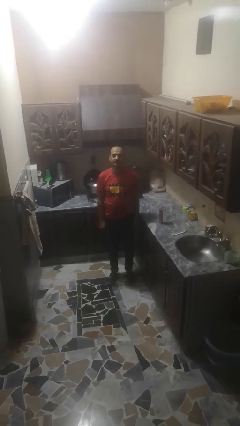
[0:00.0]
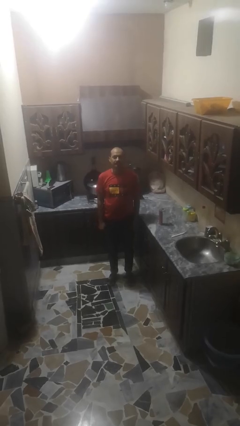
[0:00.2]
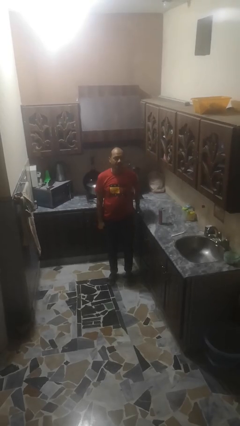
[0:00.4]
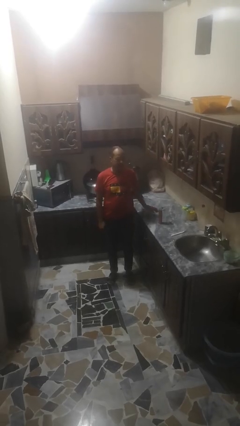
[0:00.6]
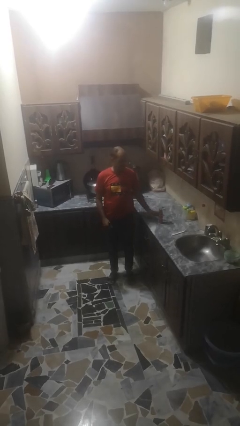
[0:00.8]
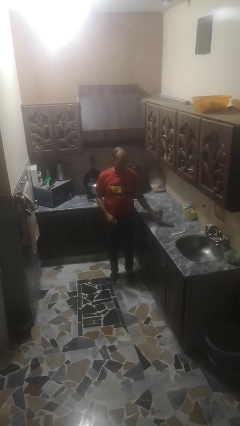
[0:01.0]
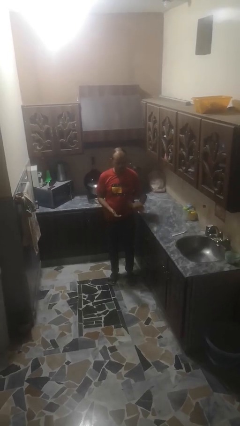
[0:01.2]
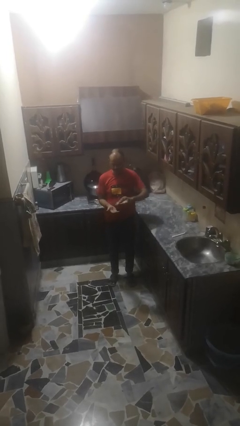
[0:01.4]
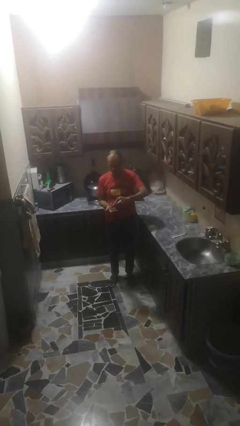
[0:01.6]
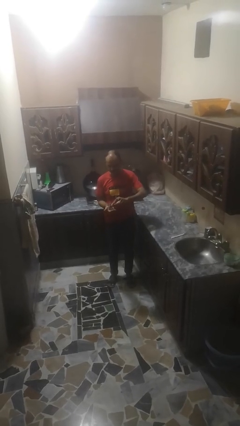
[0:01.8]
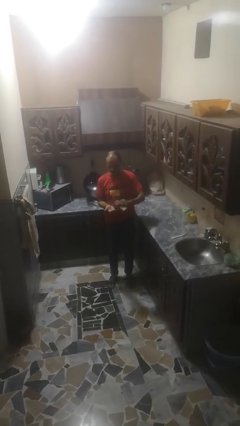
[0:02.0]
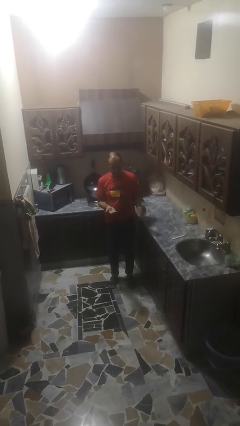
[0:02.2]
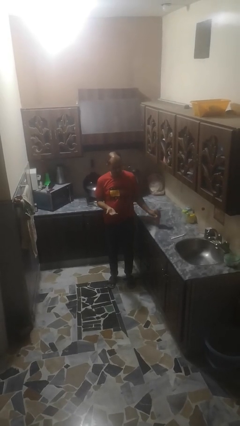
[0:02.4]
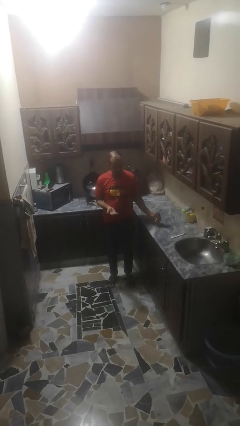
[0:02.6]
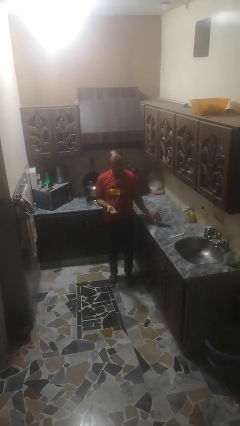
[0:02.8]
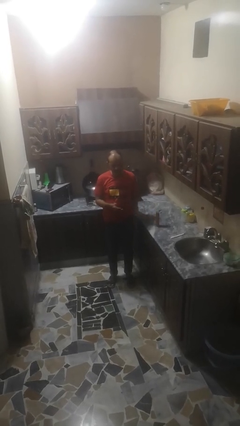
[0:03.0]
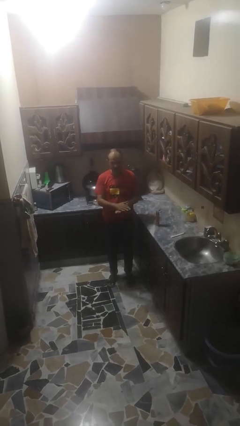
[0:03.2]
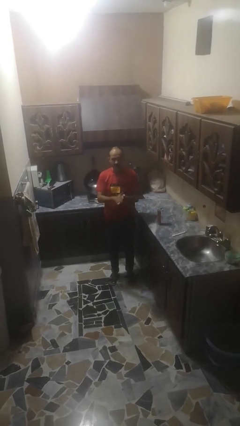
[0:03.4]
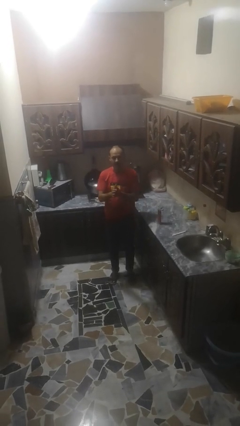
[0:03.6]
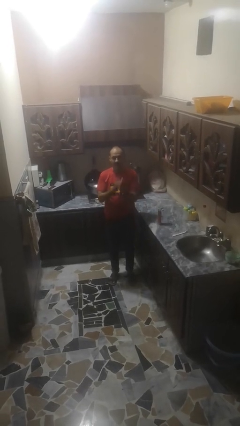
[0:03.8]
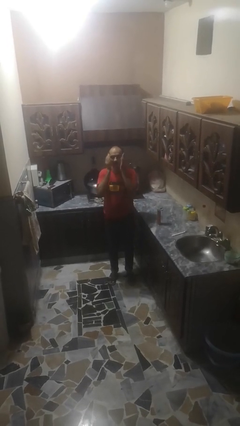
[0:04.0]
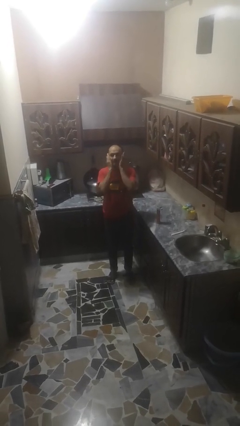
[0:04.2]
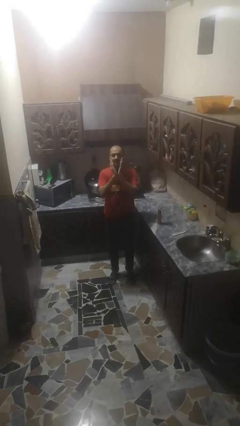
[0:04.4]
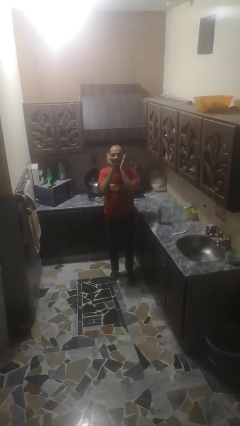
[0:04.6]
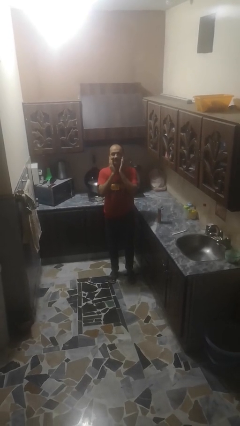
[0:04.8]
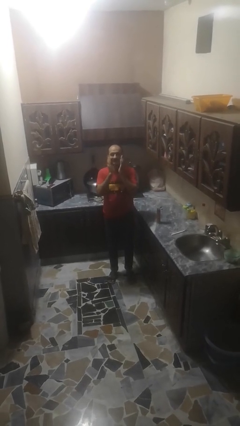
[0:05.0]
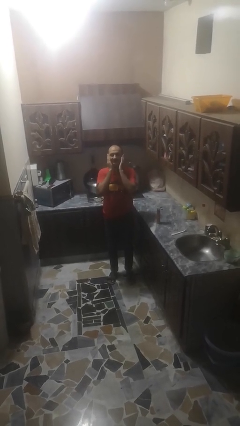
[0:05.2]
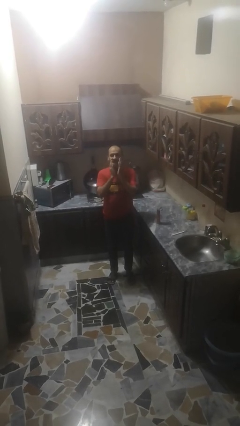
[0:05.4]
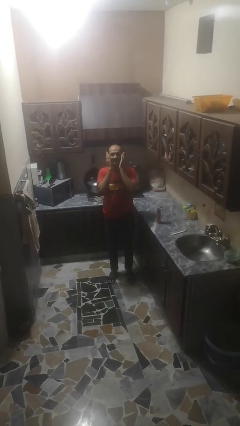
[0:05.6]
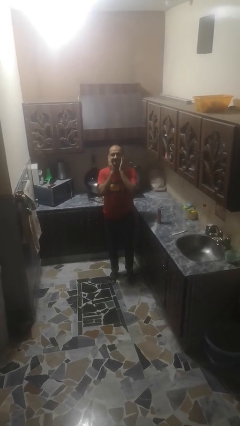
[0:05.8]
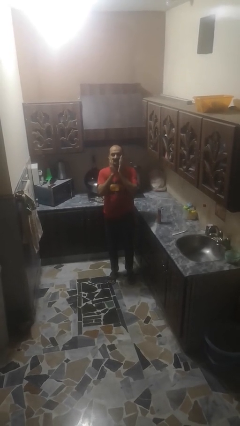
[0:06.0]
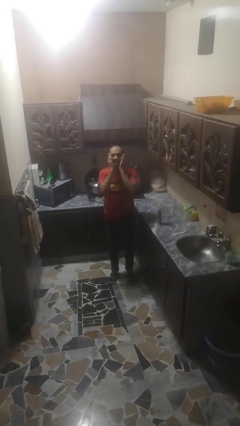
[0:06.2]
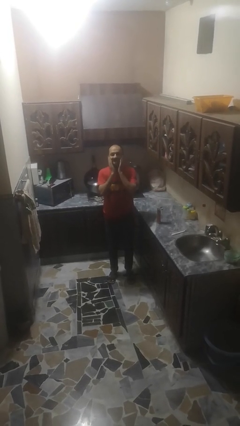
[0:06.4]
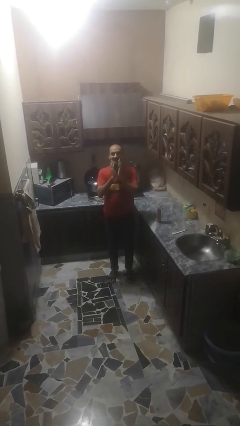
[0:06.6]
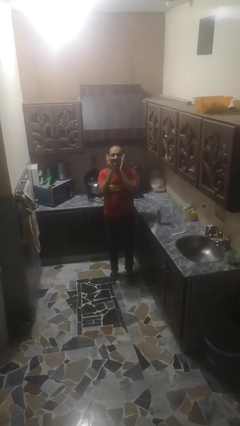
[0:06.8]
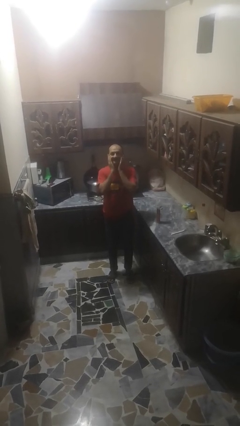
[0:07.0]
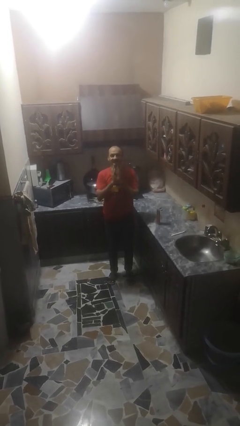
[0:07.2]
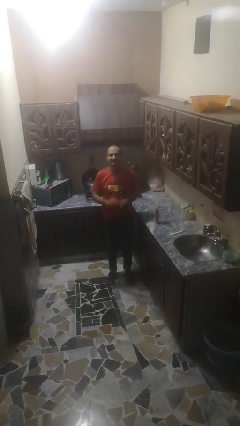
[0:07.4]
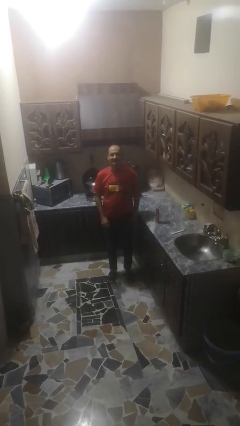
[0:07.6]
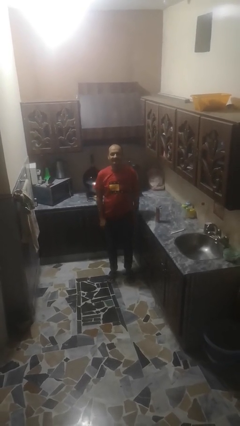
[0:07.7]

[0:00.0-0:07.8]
person applies sunscreen

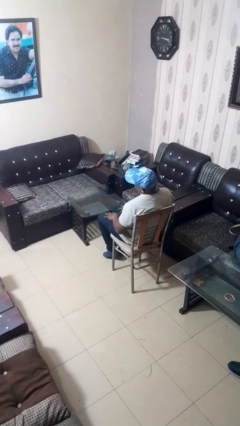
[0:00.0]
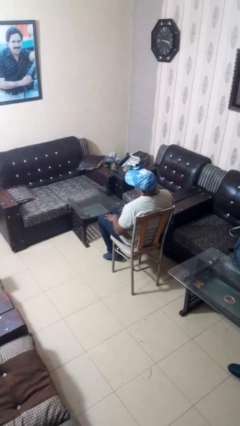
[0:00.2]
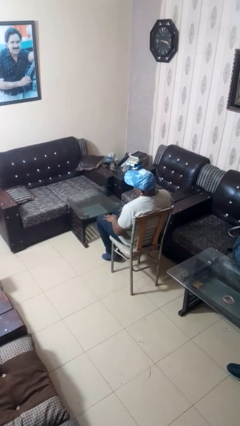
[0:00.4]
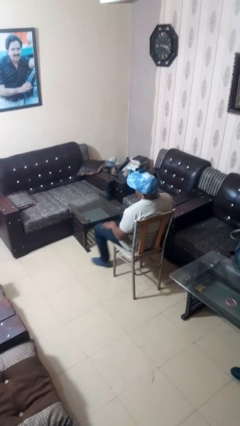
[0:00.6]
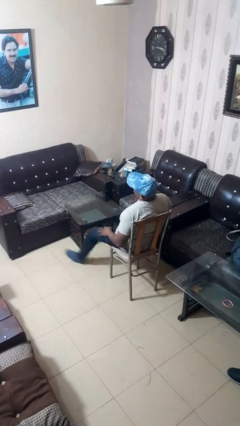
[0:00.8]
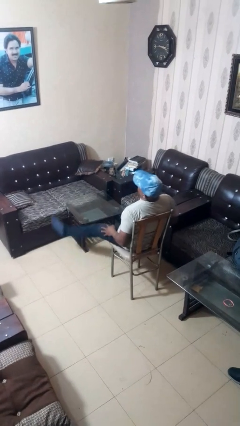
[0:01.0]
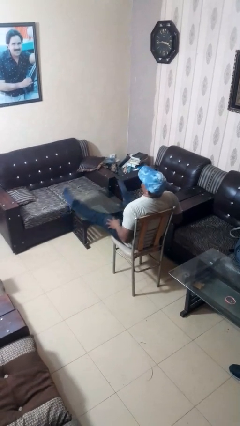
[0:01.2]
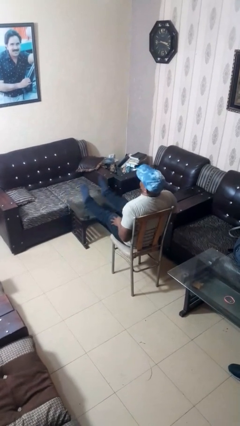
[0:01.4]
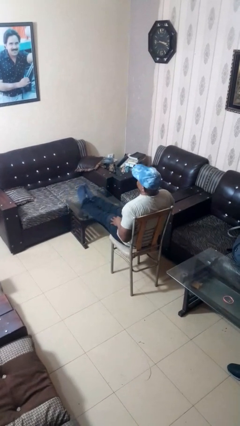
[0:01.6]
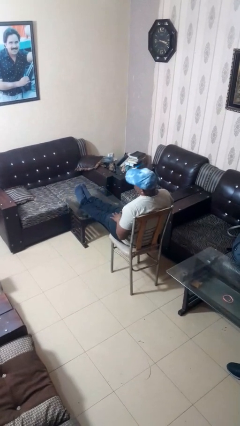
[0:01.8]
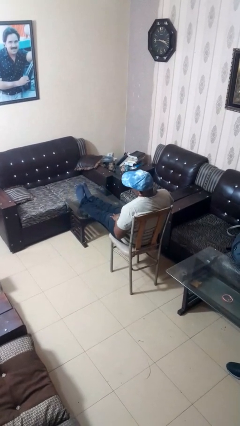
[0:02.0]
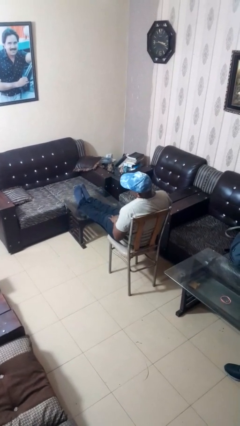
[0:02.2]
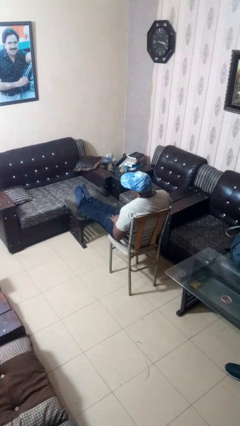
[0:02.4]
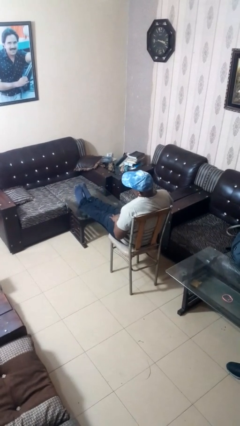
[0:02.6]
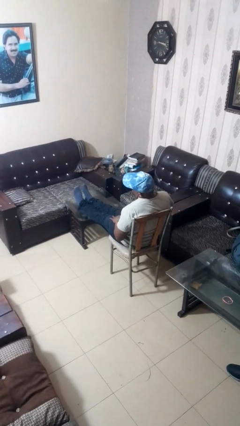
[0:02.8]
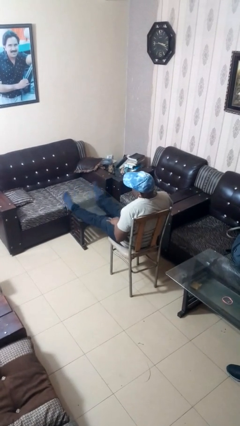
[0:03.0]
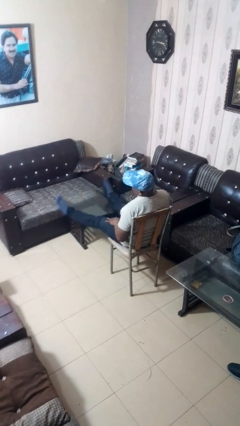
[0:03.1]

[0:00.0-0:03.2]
person puts feet up

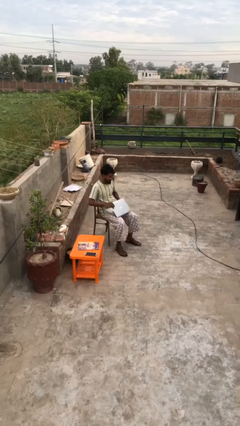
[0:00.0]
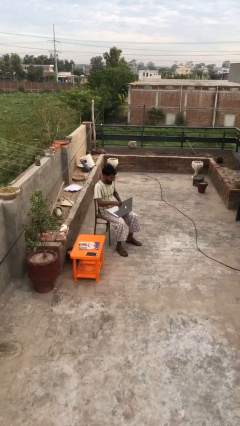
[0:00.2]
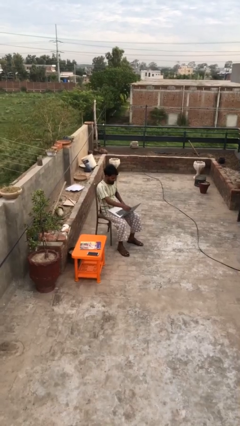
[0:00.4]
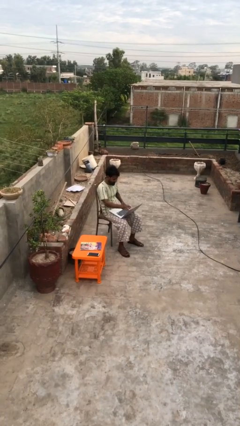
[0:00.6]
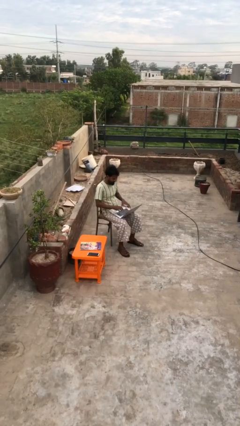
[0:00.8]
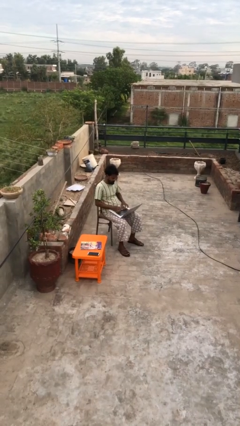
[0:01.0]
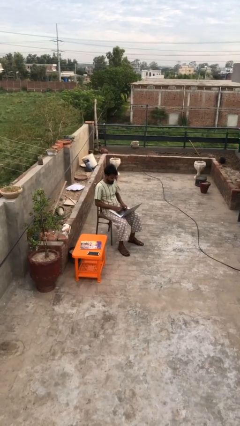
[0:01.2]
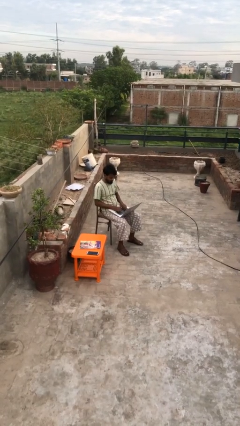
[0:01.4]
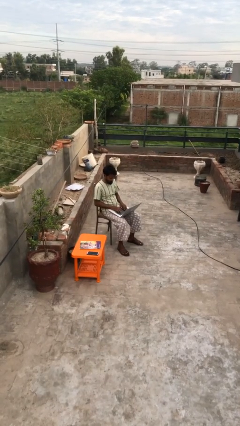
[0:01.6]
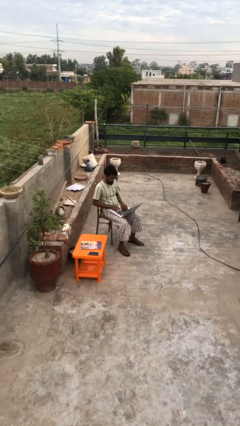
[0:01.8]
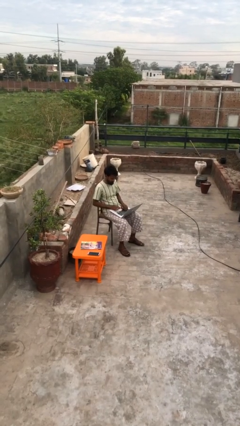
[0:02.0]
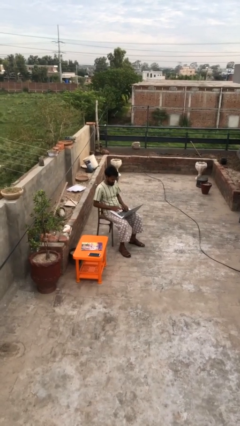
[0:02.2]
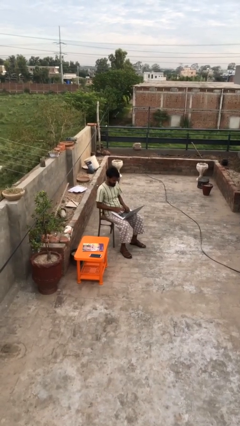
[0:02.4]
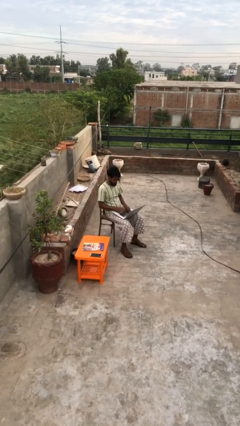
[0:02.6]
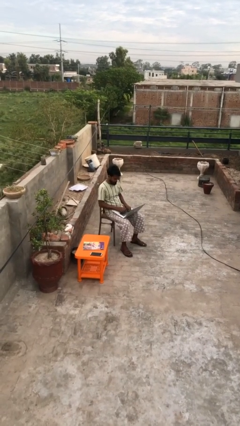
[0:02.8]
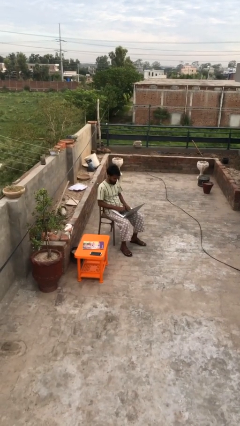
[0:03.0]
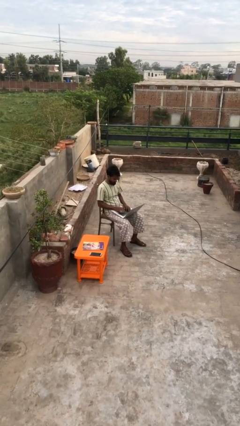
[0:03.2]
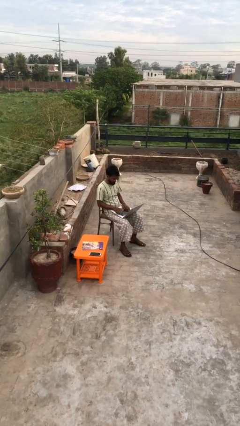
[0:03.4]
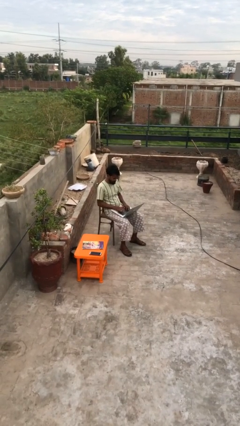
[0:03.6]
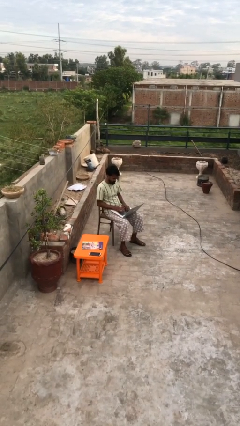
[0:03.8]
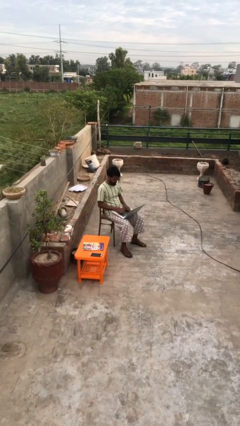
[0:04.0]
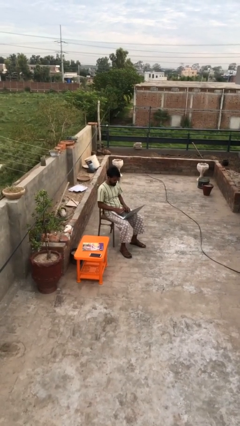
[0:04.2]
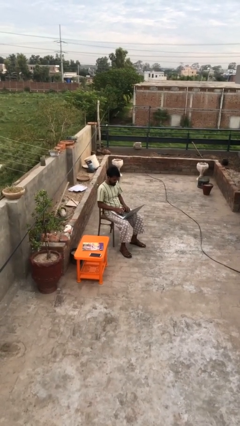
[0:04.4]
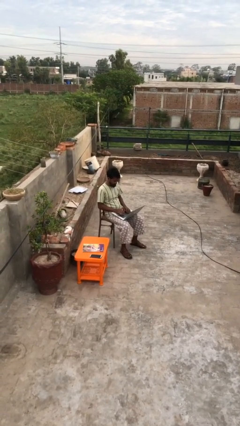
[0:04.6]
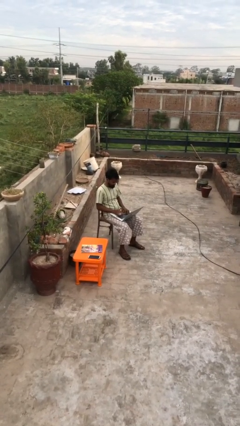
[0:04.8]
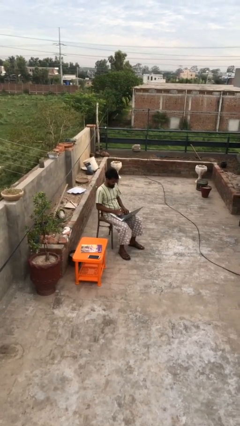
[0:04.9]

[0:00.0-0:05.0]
person interacts with laptop

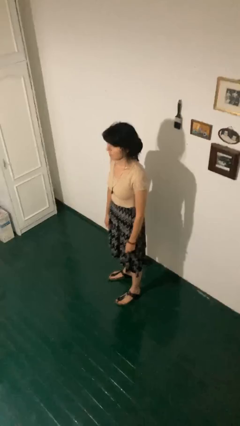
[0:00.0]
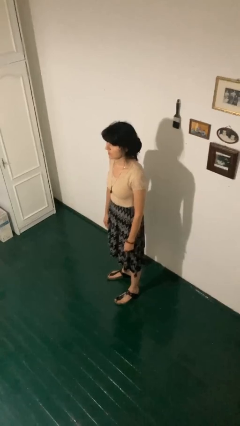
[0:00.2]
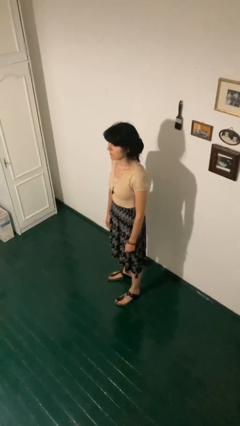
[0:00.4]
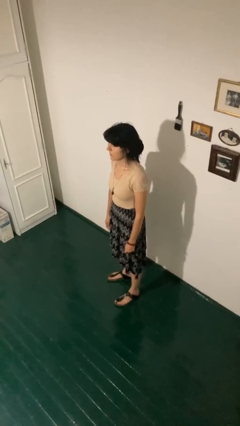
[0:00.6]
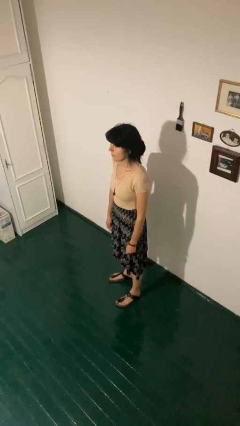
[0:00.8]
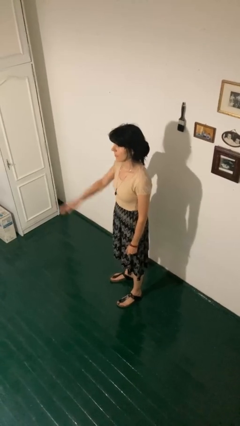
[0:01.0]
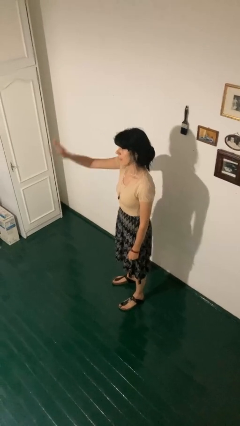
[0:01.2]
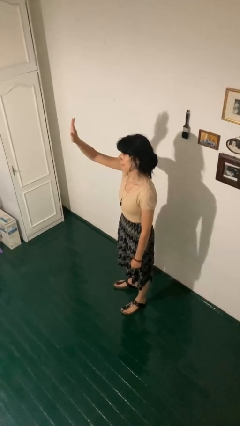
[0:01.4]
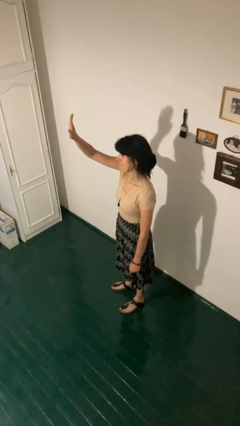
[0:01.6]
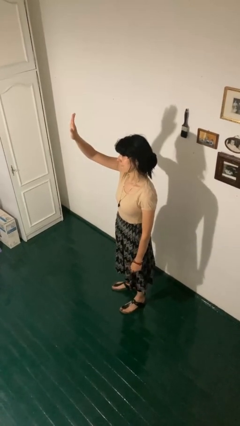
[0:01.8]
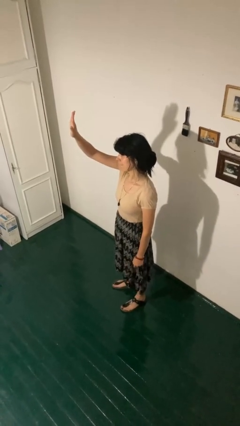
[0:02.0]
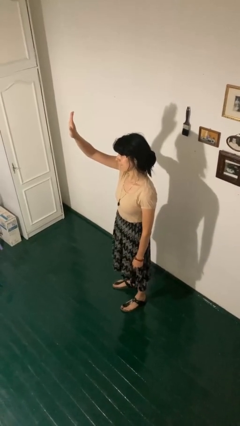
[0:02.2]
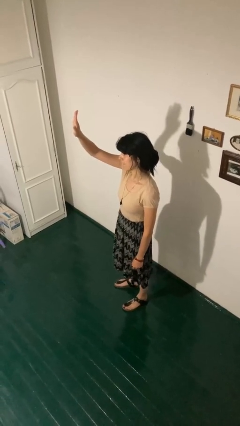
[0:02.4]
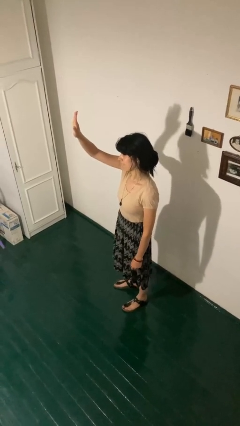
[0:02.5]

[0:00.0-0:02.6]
person gestures raise hand
